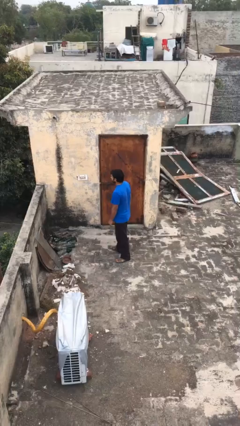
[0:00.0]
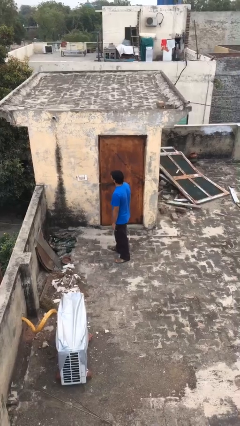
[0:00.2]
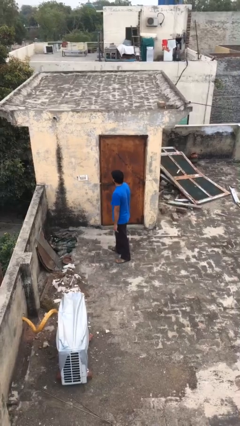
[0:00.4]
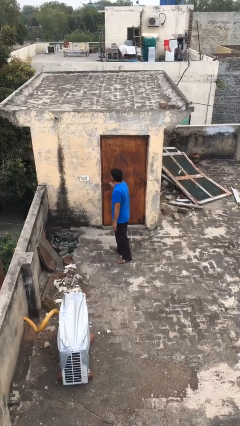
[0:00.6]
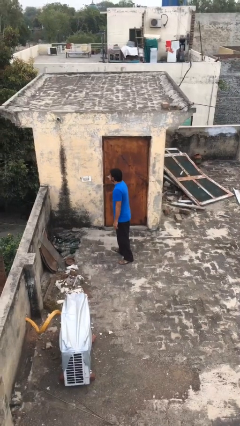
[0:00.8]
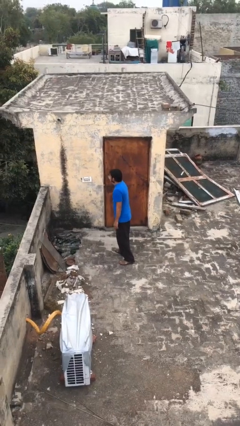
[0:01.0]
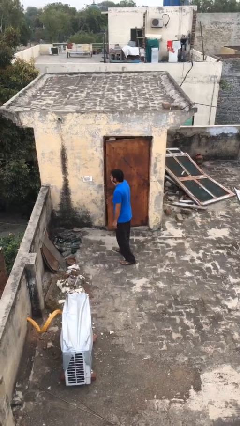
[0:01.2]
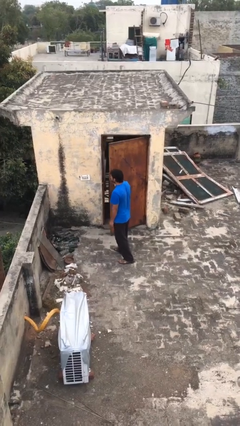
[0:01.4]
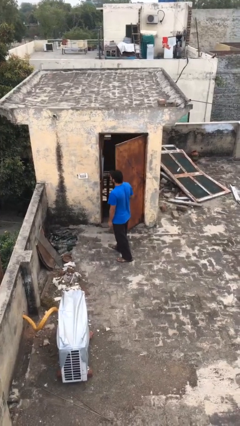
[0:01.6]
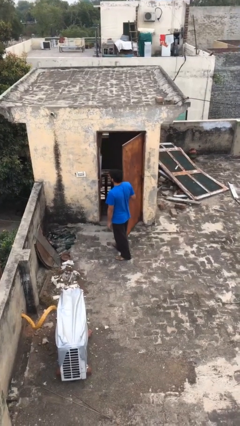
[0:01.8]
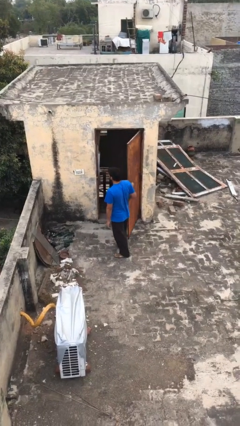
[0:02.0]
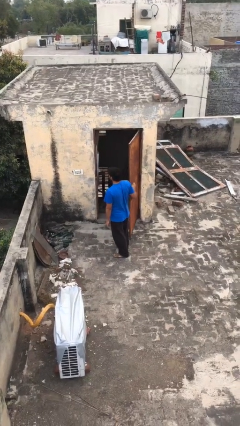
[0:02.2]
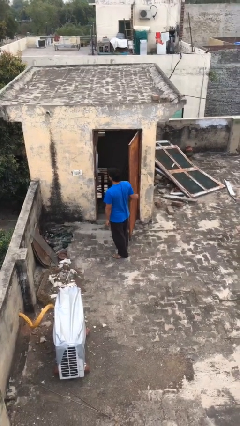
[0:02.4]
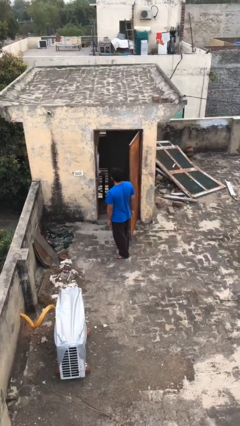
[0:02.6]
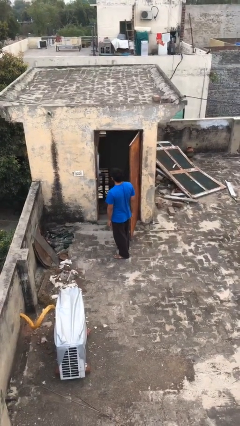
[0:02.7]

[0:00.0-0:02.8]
person opens facility door

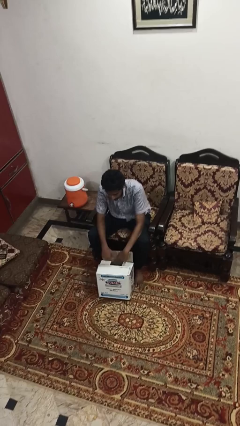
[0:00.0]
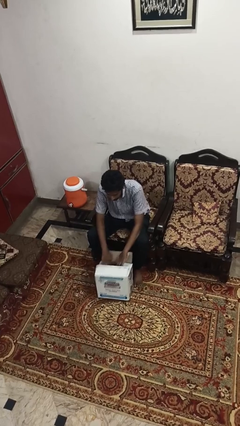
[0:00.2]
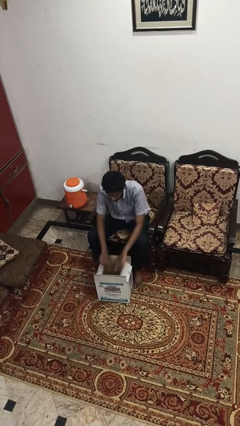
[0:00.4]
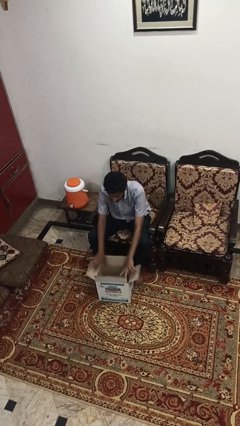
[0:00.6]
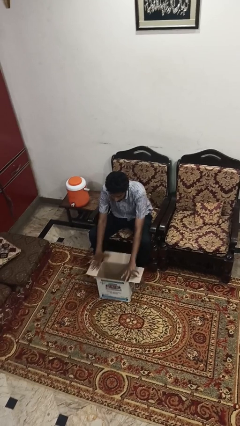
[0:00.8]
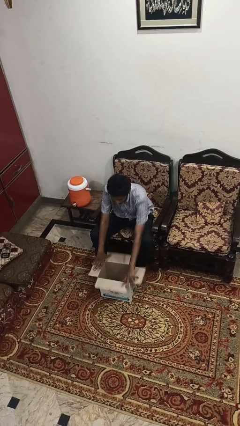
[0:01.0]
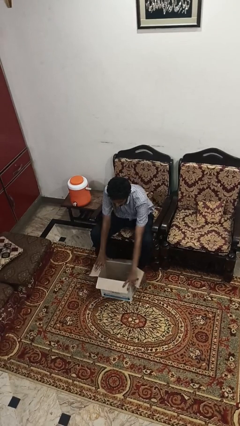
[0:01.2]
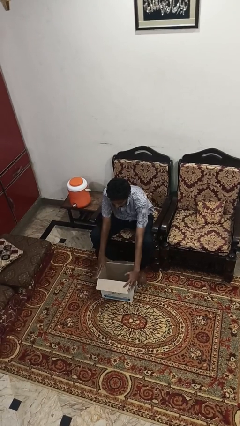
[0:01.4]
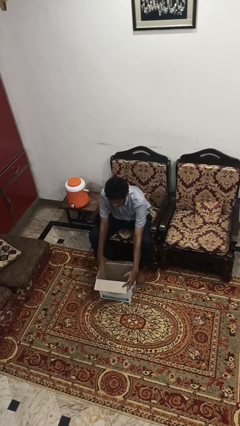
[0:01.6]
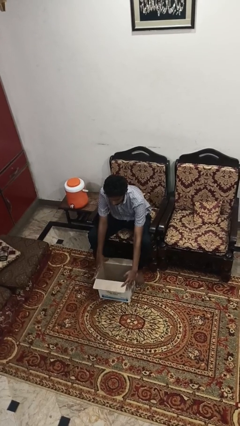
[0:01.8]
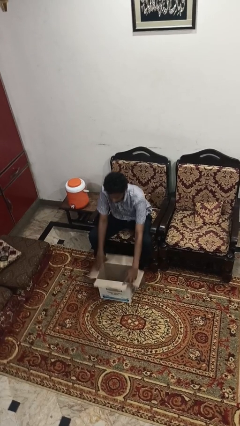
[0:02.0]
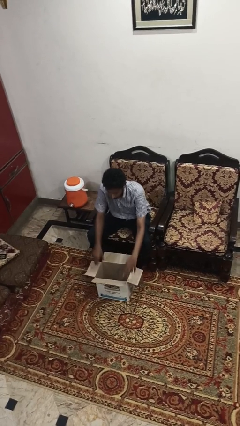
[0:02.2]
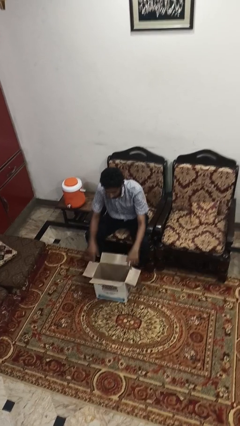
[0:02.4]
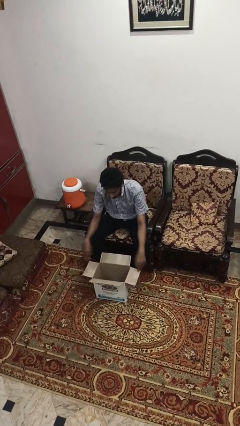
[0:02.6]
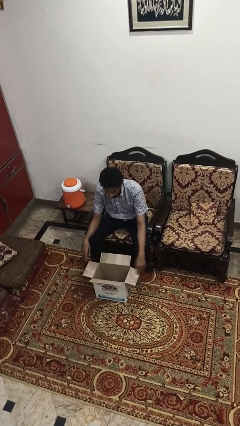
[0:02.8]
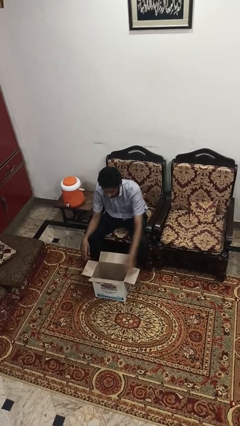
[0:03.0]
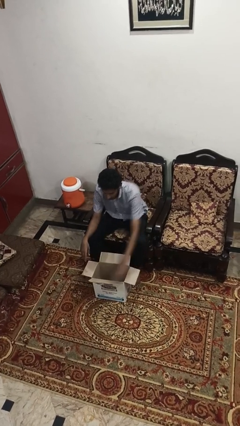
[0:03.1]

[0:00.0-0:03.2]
person opens box

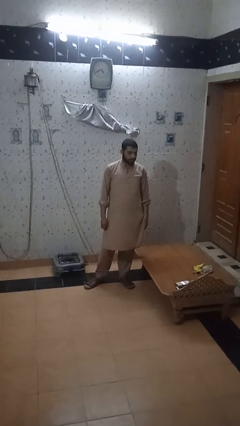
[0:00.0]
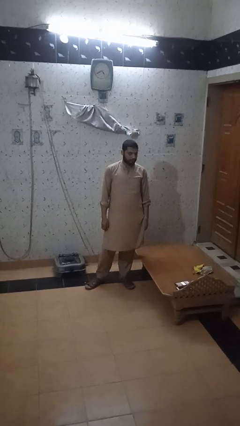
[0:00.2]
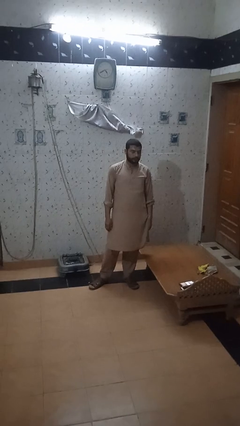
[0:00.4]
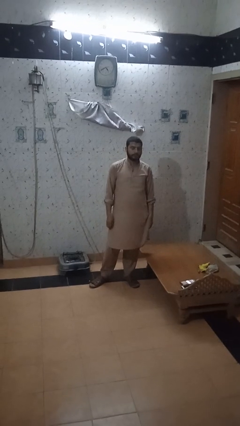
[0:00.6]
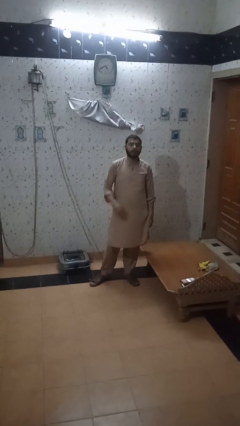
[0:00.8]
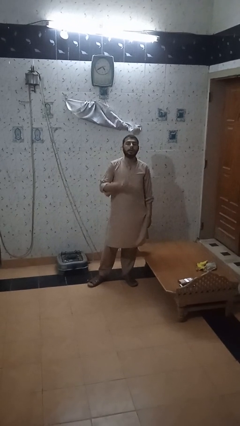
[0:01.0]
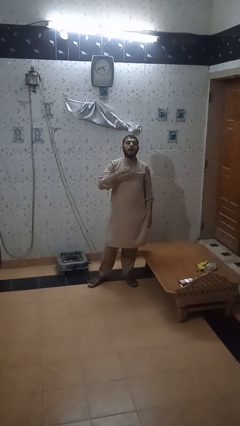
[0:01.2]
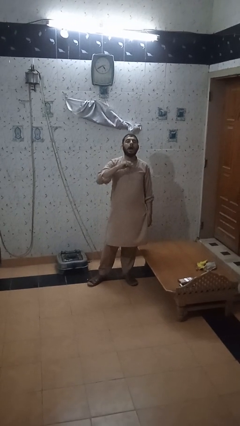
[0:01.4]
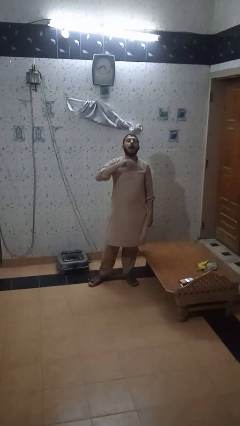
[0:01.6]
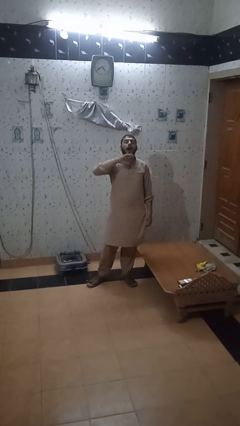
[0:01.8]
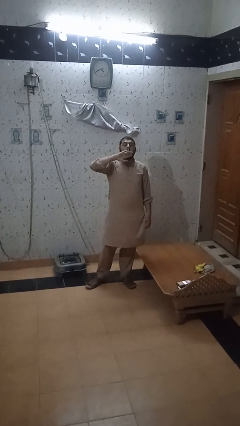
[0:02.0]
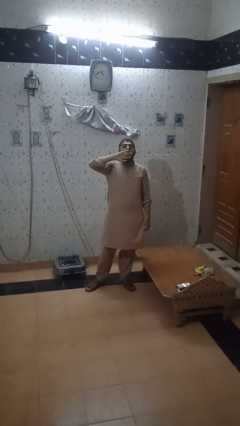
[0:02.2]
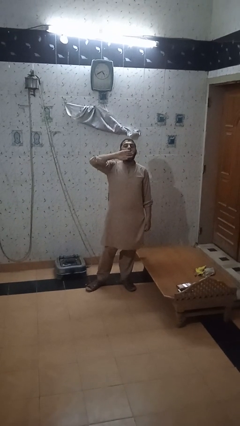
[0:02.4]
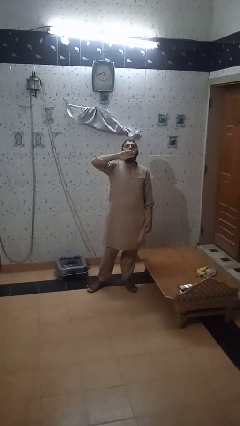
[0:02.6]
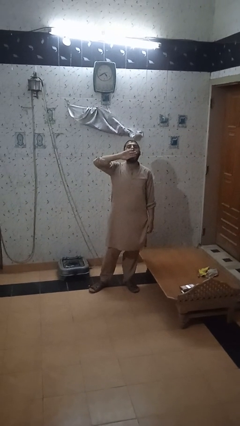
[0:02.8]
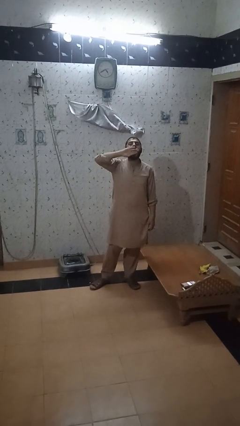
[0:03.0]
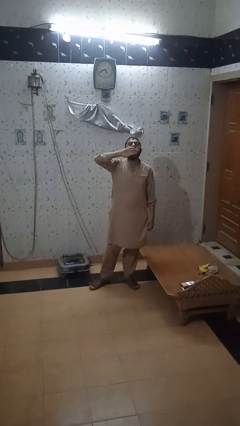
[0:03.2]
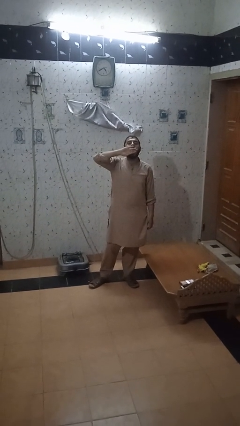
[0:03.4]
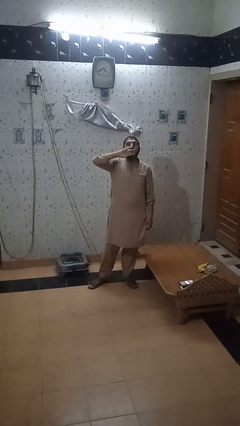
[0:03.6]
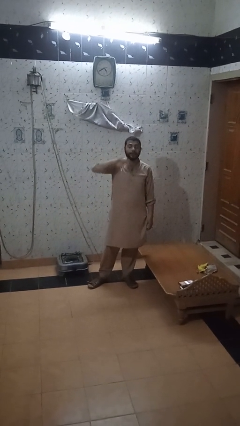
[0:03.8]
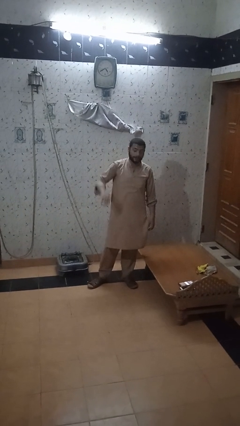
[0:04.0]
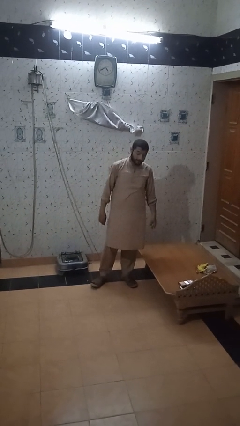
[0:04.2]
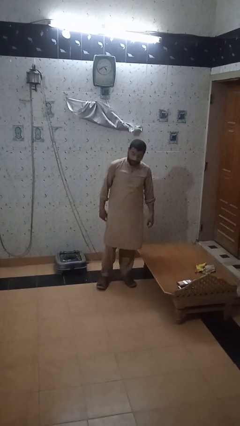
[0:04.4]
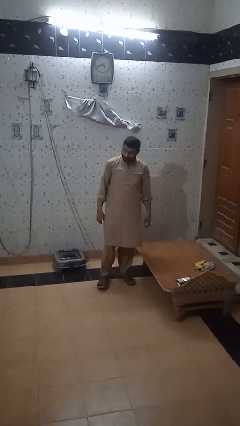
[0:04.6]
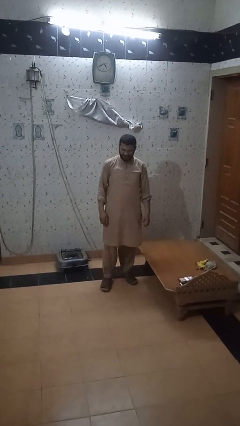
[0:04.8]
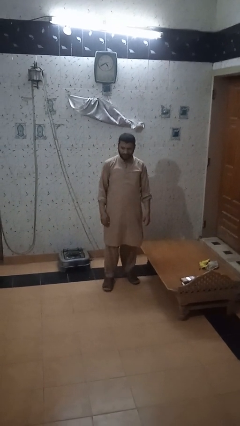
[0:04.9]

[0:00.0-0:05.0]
person yawns

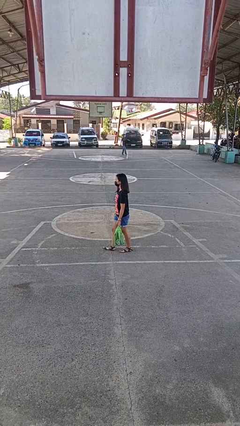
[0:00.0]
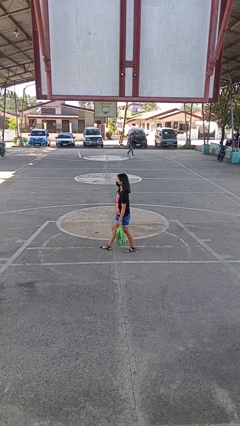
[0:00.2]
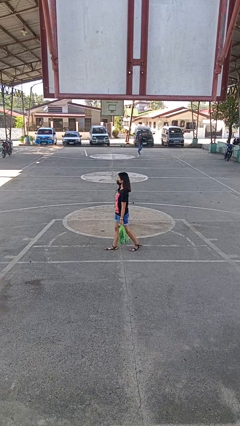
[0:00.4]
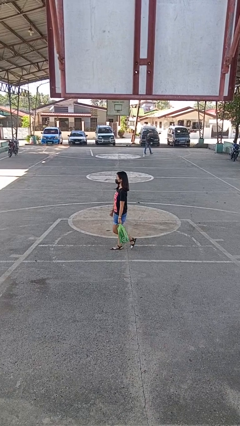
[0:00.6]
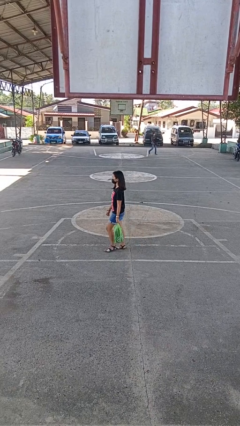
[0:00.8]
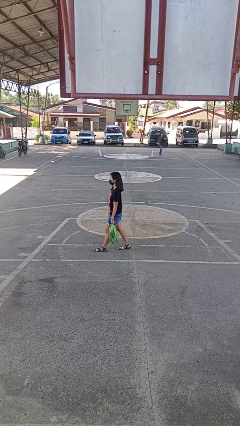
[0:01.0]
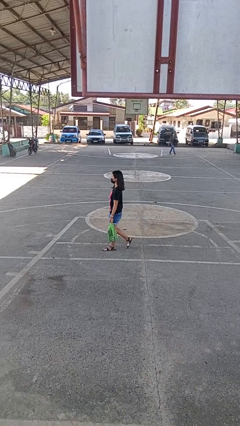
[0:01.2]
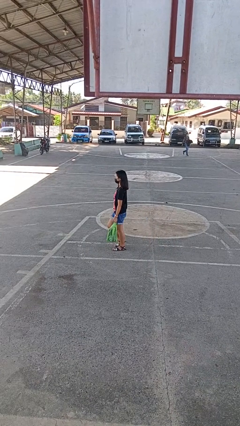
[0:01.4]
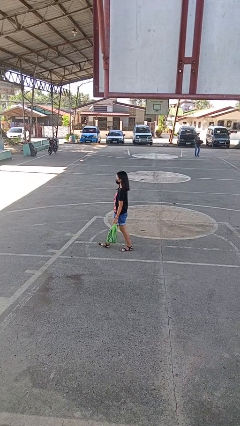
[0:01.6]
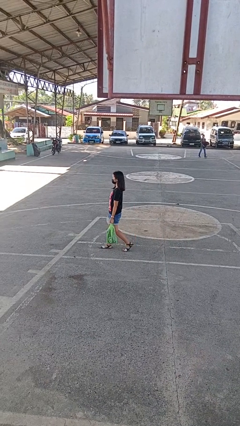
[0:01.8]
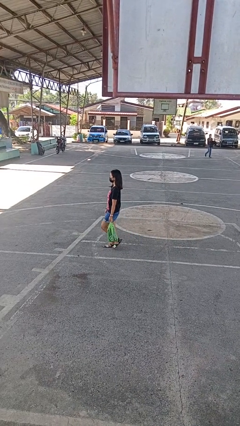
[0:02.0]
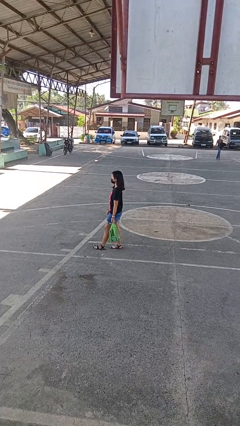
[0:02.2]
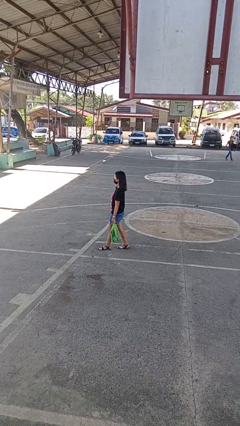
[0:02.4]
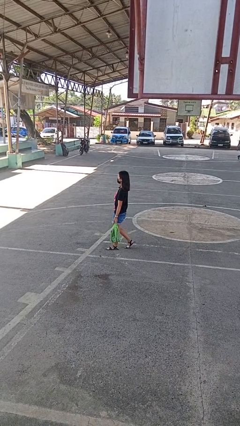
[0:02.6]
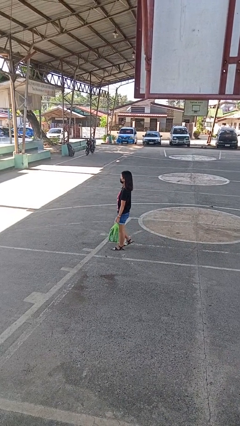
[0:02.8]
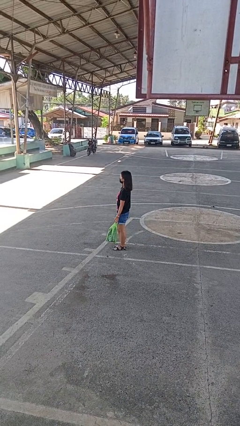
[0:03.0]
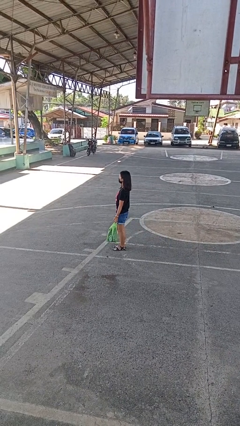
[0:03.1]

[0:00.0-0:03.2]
person carries groceries

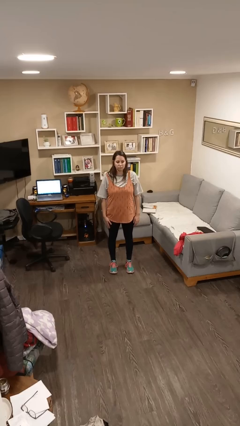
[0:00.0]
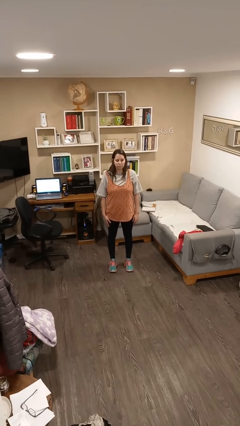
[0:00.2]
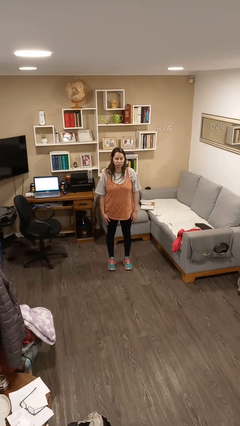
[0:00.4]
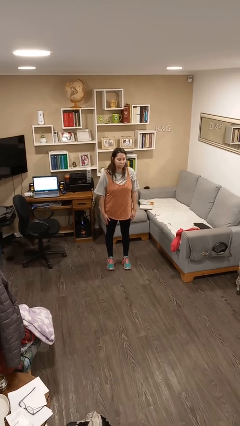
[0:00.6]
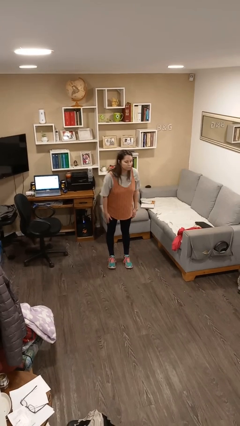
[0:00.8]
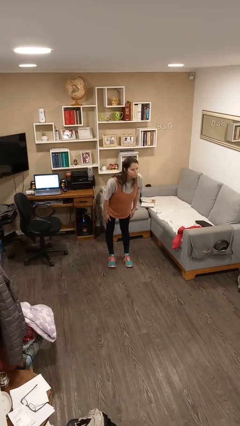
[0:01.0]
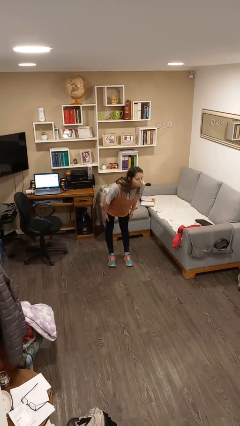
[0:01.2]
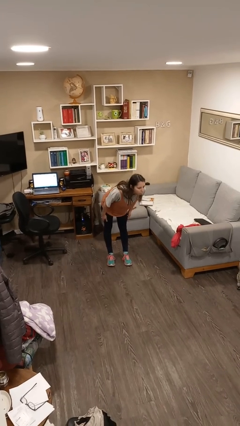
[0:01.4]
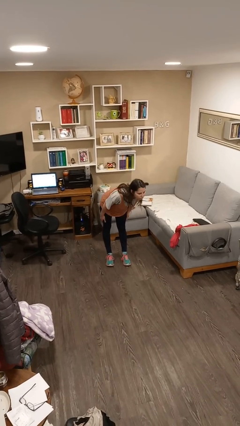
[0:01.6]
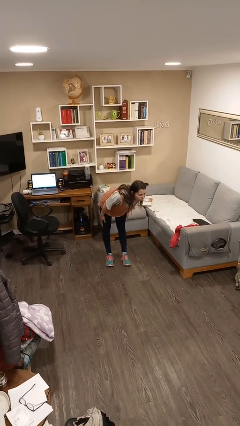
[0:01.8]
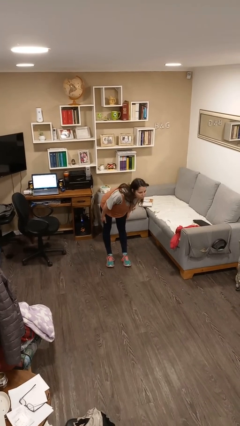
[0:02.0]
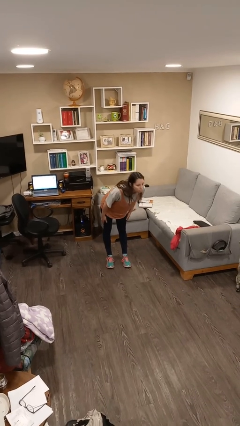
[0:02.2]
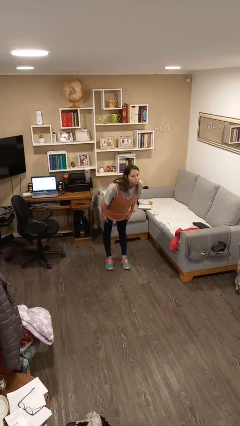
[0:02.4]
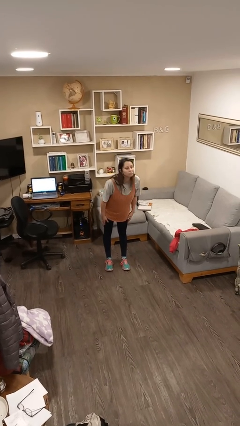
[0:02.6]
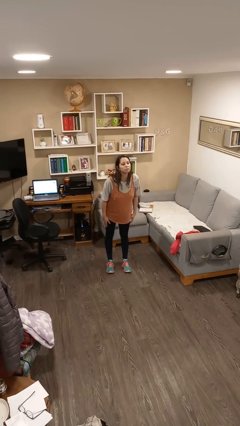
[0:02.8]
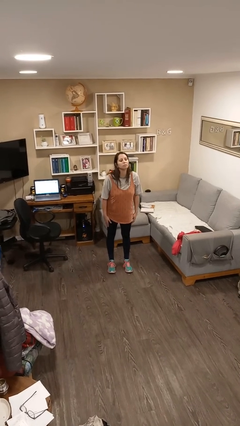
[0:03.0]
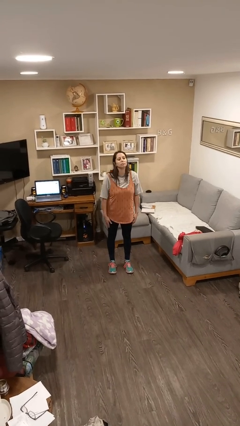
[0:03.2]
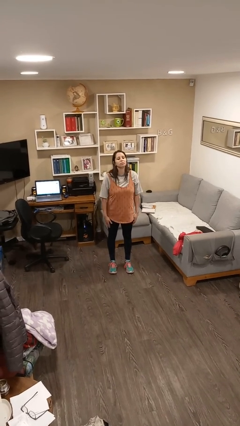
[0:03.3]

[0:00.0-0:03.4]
person bows
